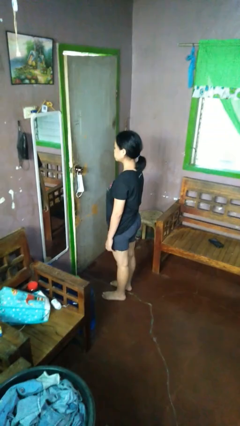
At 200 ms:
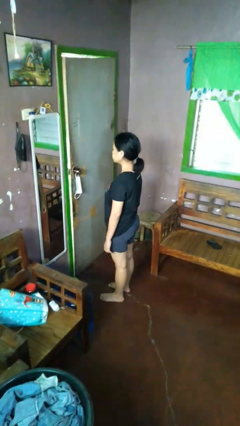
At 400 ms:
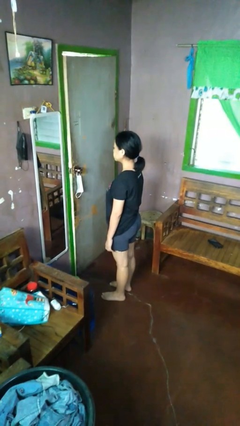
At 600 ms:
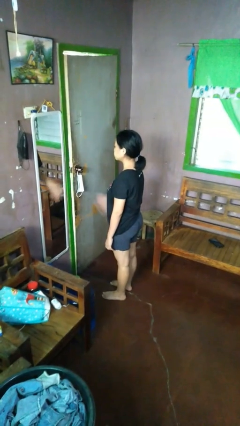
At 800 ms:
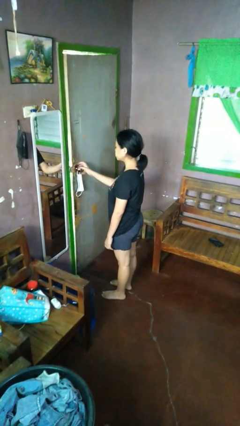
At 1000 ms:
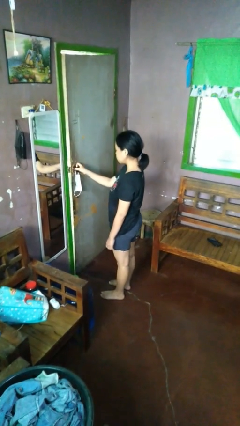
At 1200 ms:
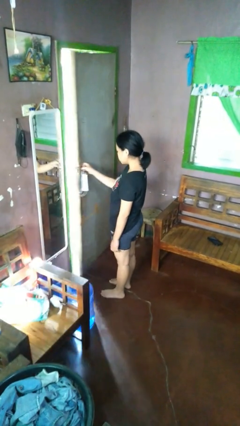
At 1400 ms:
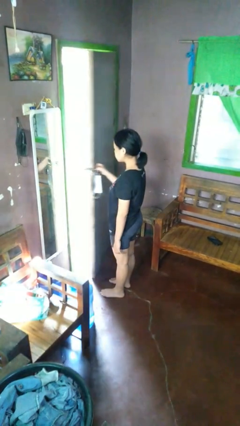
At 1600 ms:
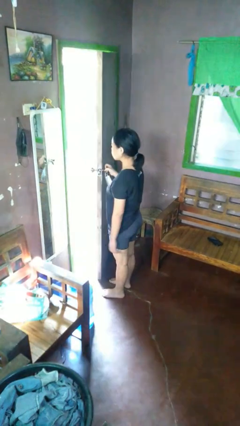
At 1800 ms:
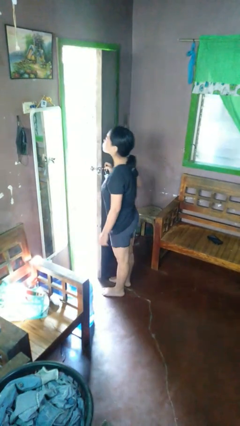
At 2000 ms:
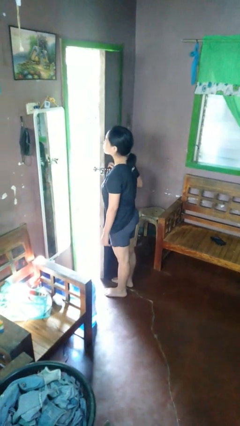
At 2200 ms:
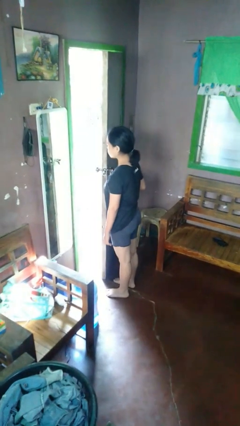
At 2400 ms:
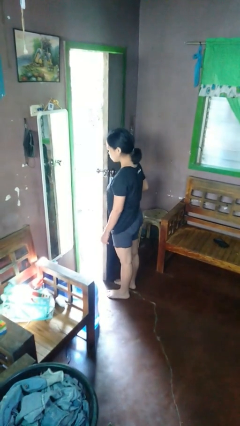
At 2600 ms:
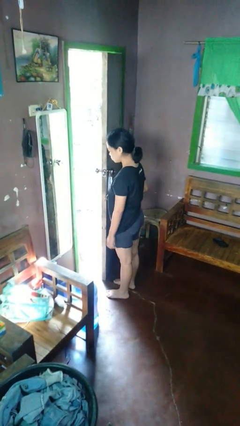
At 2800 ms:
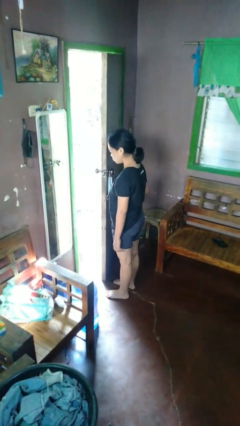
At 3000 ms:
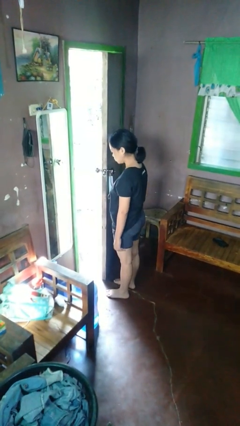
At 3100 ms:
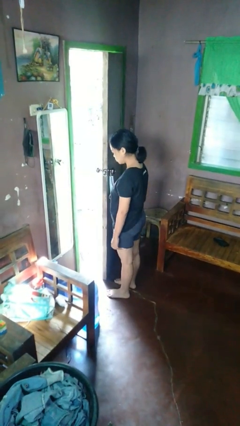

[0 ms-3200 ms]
person opens facility door

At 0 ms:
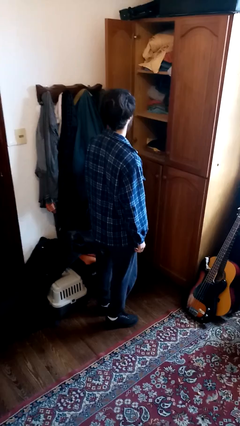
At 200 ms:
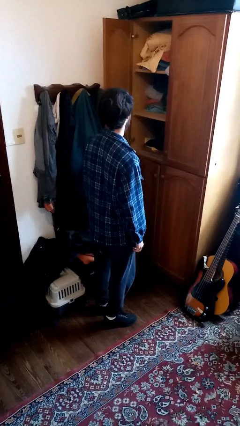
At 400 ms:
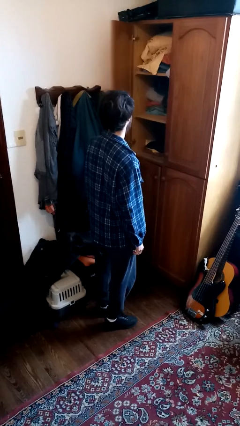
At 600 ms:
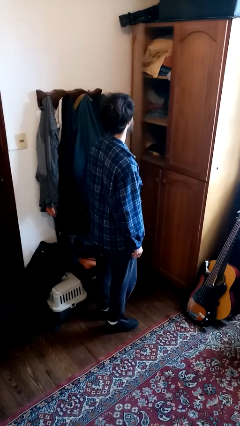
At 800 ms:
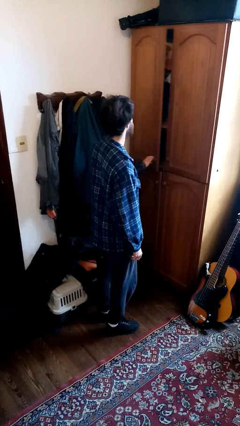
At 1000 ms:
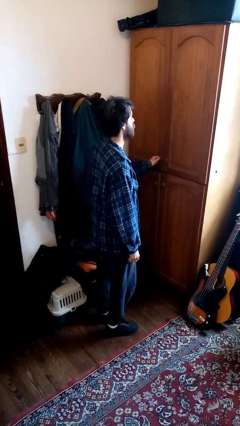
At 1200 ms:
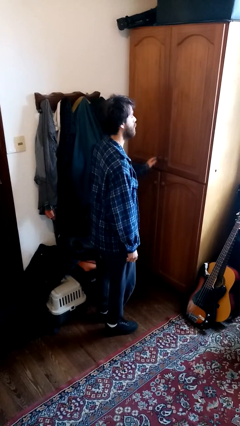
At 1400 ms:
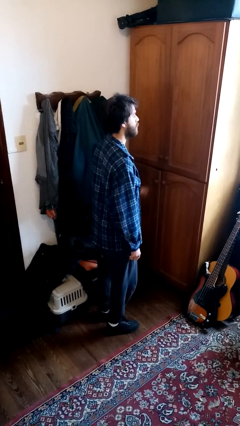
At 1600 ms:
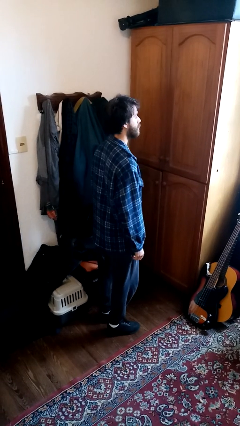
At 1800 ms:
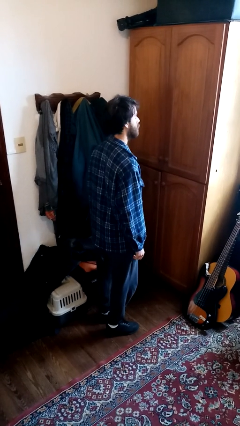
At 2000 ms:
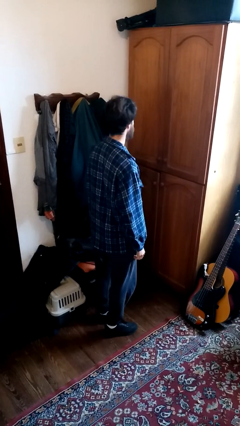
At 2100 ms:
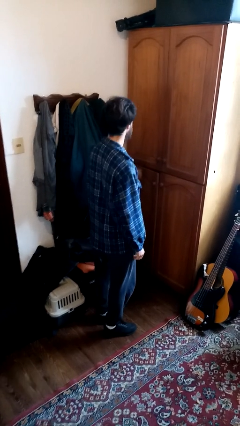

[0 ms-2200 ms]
person closes dresser drawer

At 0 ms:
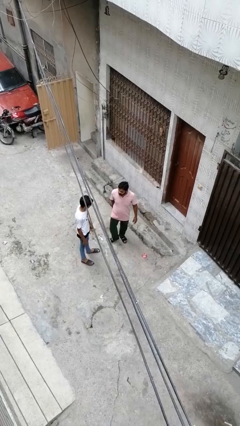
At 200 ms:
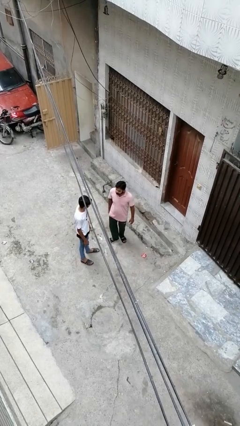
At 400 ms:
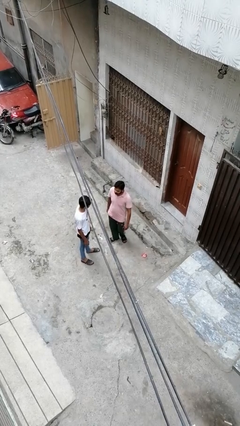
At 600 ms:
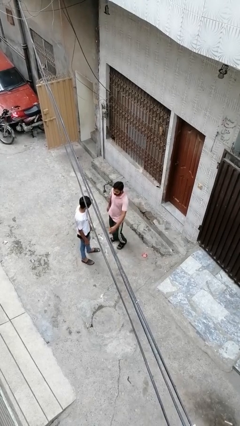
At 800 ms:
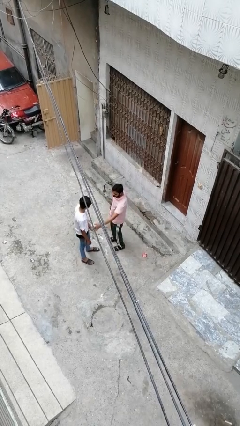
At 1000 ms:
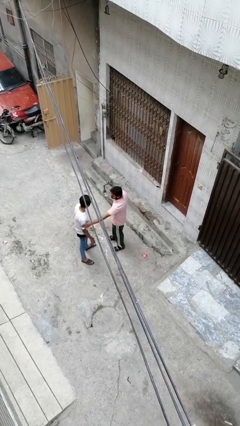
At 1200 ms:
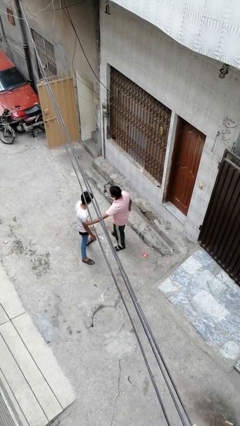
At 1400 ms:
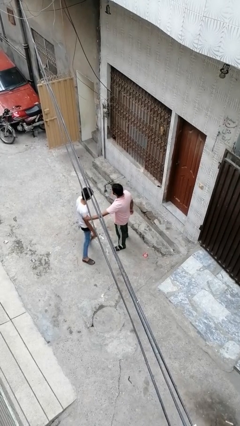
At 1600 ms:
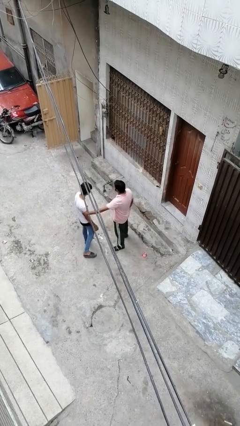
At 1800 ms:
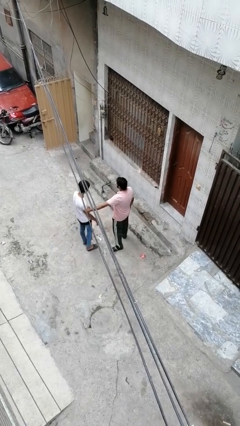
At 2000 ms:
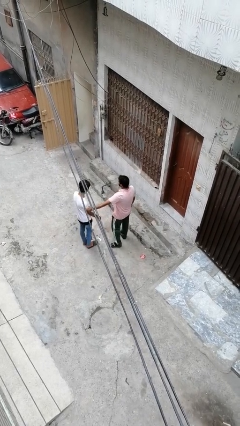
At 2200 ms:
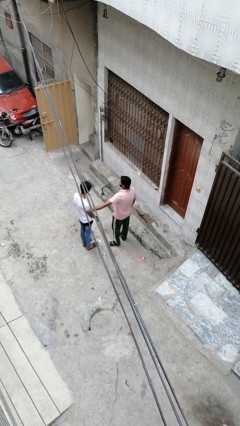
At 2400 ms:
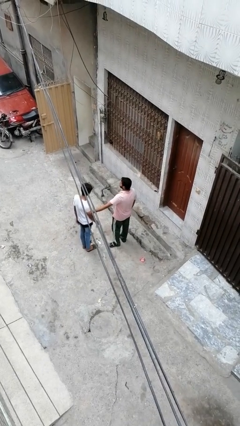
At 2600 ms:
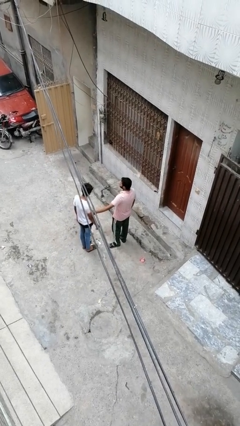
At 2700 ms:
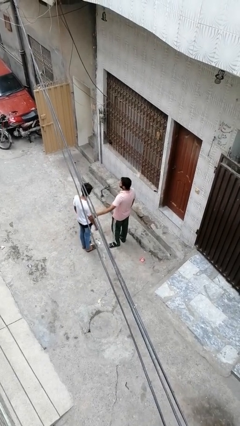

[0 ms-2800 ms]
person grabs person by bicep

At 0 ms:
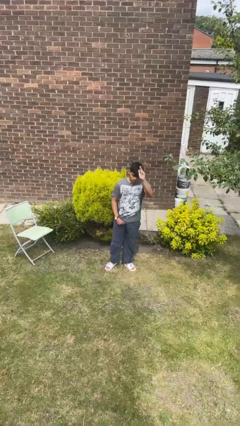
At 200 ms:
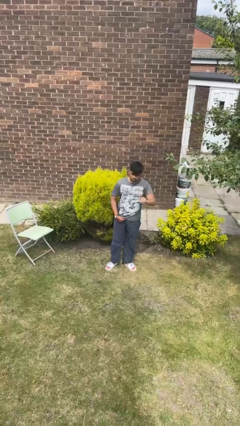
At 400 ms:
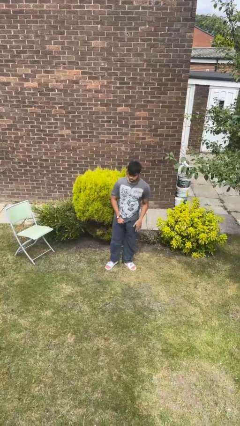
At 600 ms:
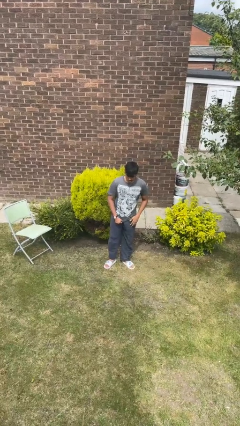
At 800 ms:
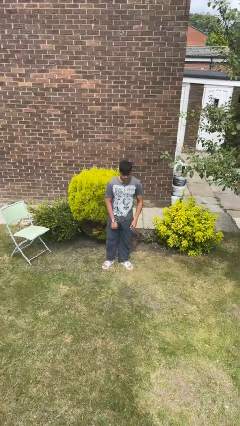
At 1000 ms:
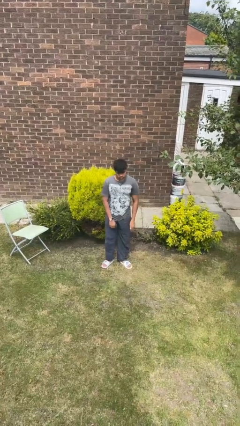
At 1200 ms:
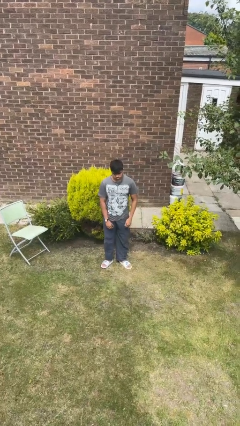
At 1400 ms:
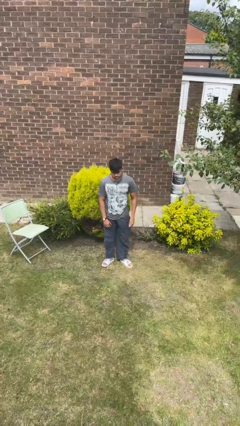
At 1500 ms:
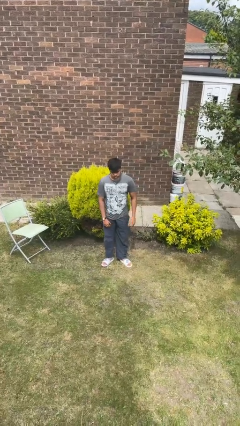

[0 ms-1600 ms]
person gestures lower hand

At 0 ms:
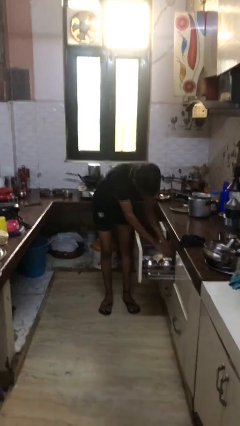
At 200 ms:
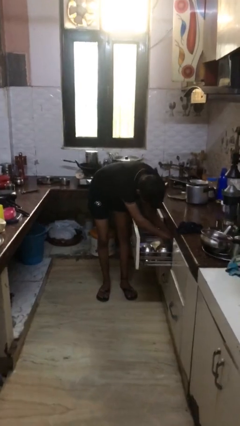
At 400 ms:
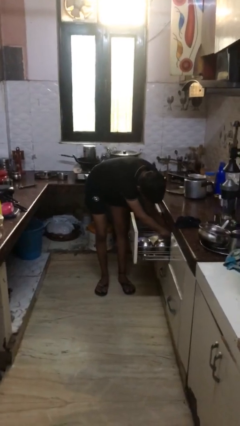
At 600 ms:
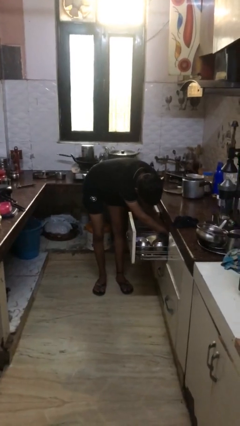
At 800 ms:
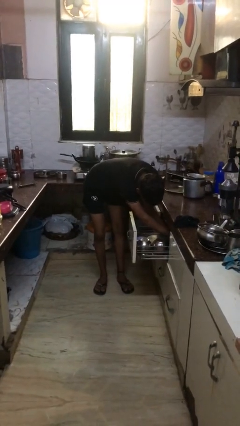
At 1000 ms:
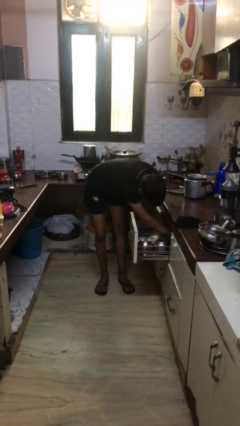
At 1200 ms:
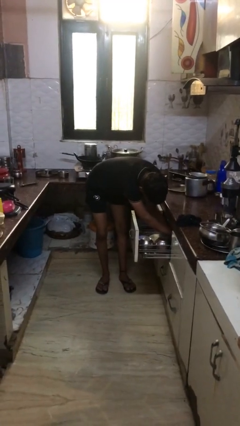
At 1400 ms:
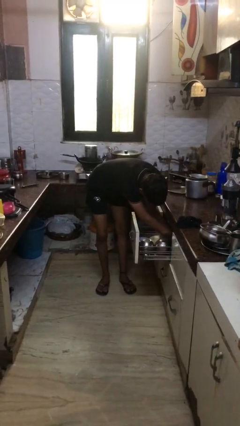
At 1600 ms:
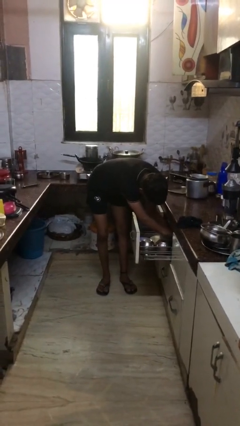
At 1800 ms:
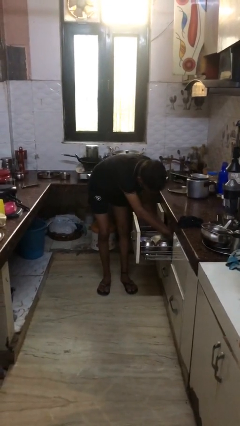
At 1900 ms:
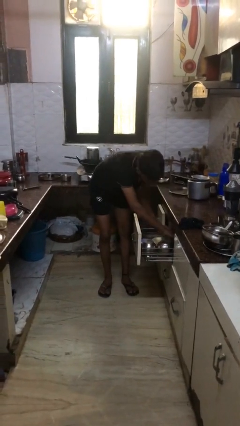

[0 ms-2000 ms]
person searches in kitchen drawer

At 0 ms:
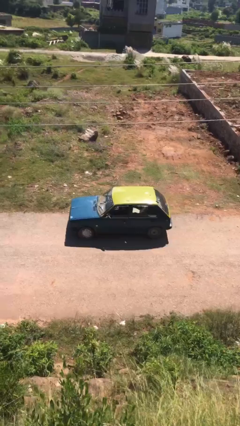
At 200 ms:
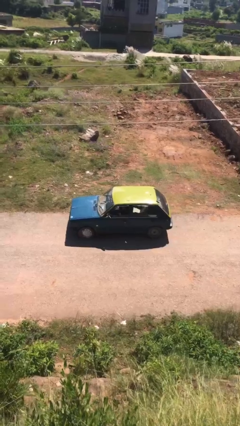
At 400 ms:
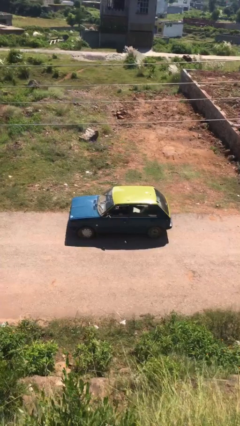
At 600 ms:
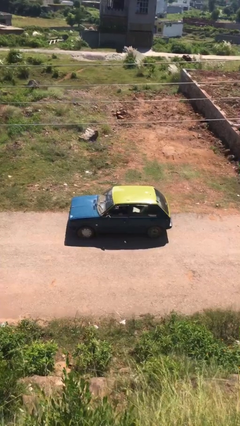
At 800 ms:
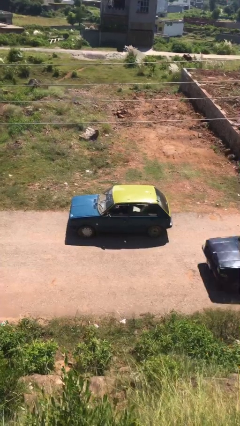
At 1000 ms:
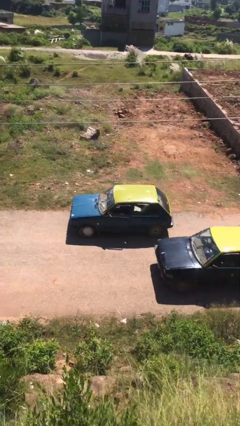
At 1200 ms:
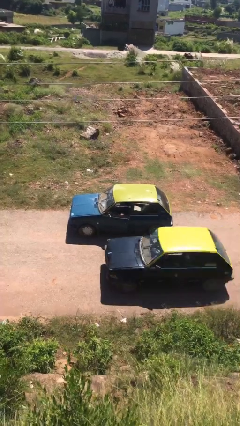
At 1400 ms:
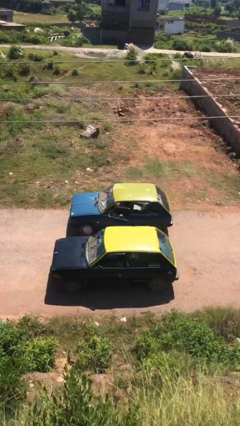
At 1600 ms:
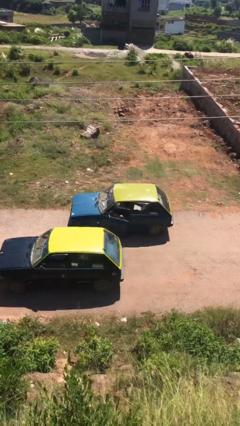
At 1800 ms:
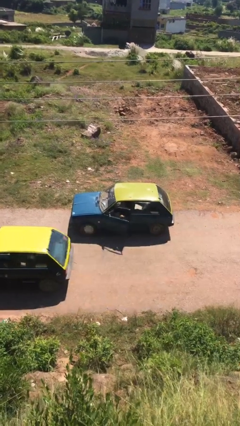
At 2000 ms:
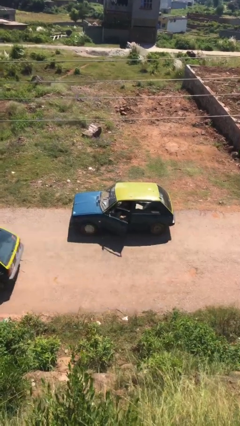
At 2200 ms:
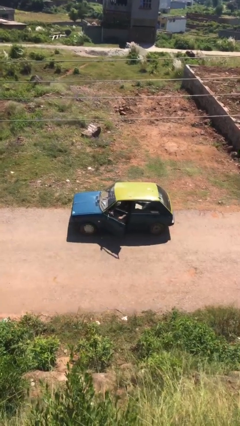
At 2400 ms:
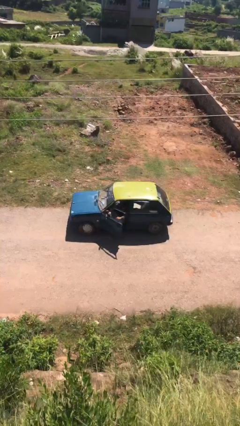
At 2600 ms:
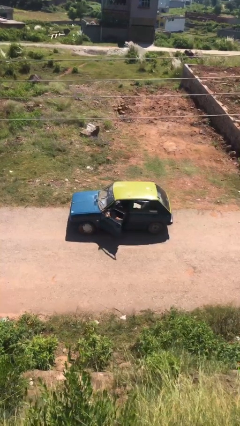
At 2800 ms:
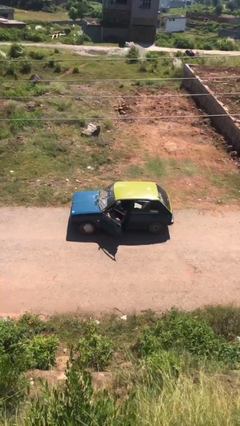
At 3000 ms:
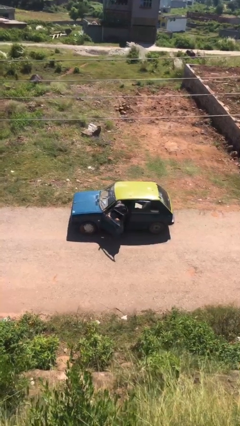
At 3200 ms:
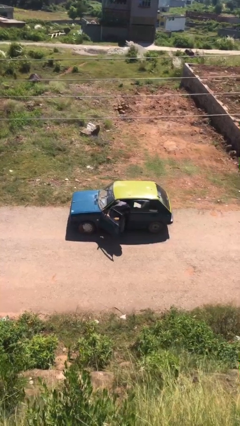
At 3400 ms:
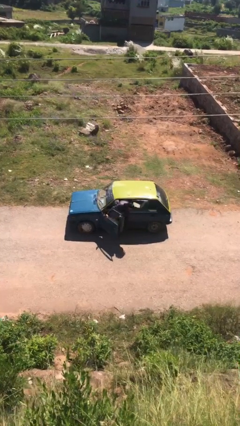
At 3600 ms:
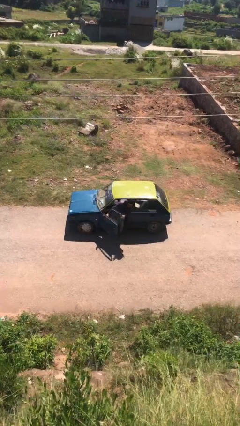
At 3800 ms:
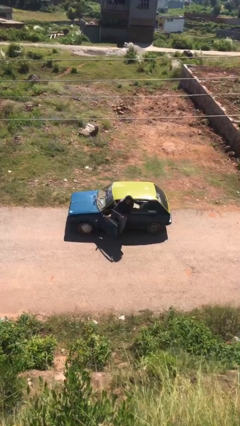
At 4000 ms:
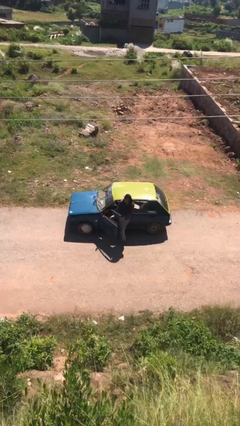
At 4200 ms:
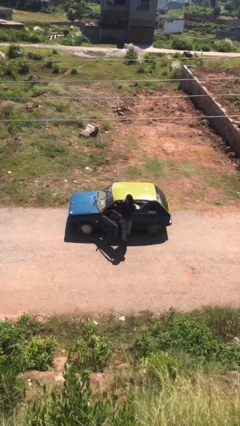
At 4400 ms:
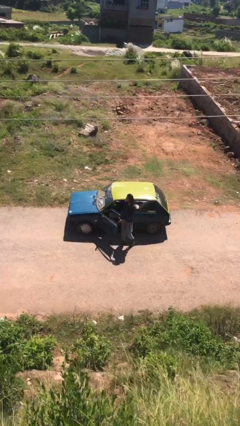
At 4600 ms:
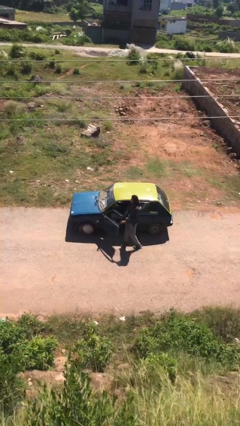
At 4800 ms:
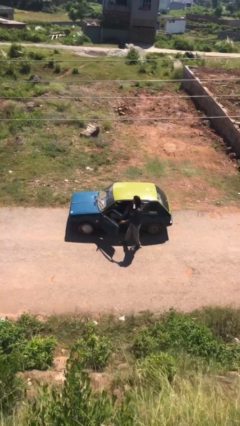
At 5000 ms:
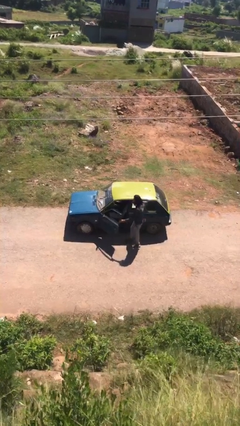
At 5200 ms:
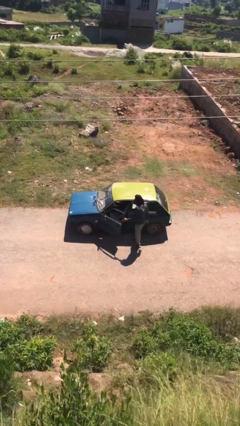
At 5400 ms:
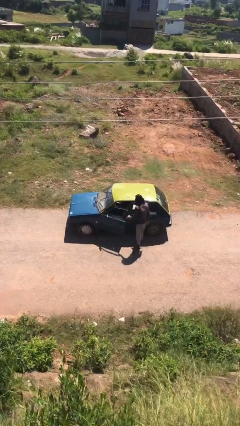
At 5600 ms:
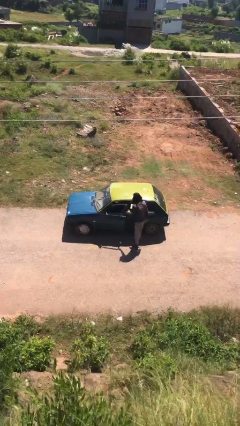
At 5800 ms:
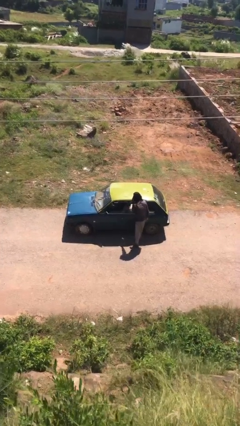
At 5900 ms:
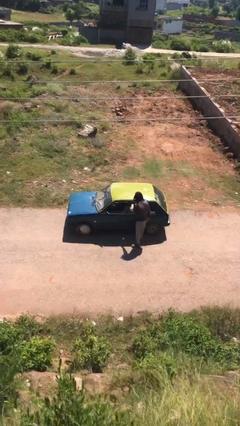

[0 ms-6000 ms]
car drops off person
